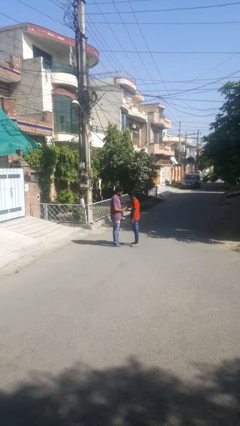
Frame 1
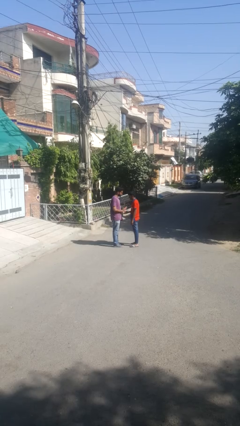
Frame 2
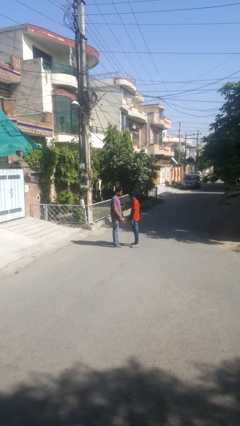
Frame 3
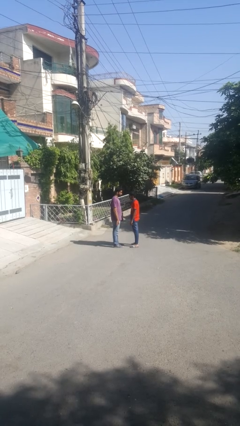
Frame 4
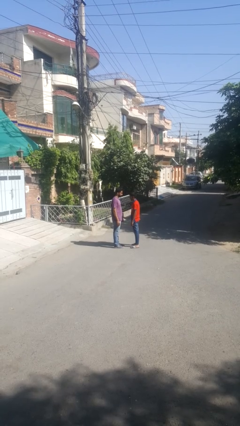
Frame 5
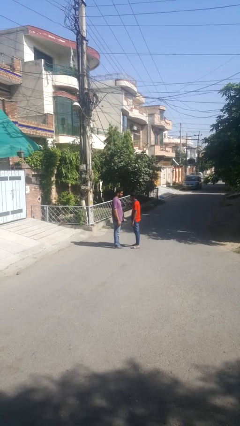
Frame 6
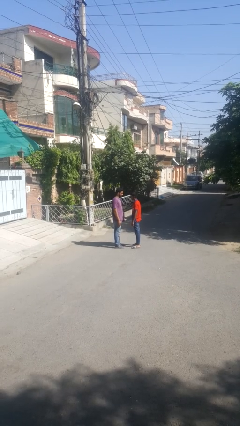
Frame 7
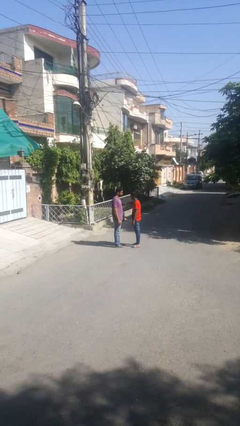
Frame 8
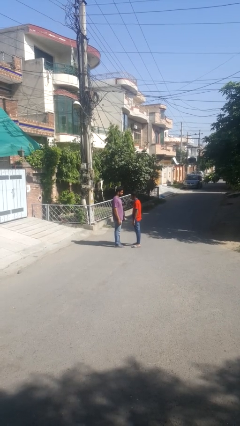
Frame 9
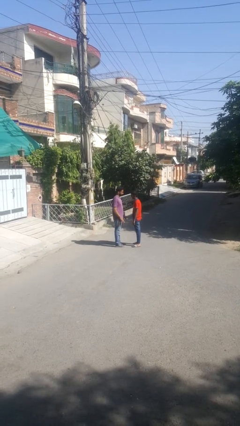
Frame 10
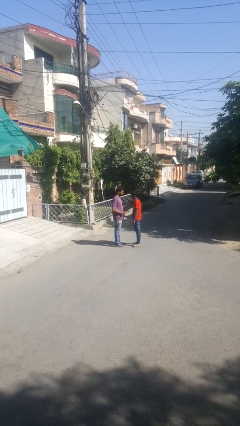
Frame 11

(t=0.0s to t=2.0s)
person highfives hand

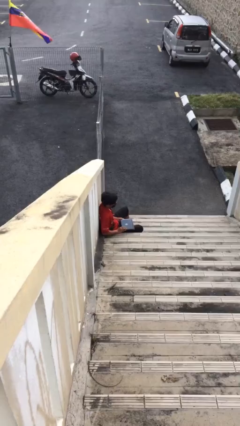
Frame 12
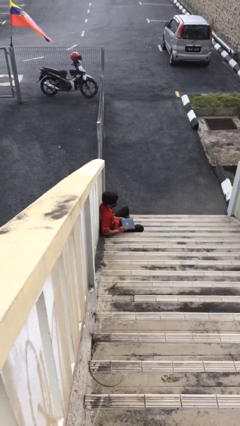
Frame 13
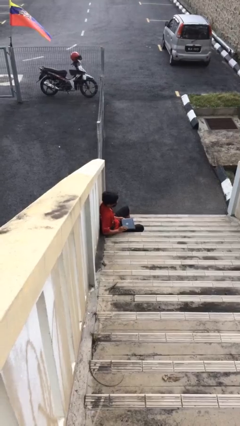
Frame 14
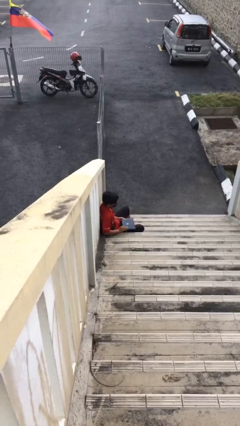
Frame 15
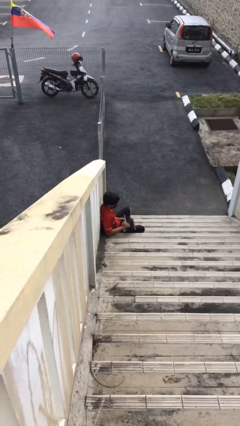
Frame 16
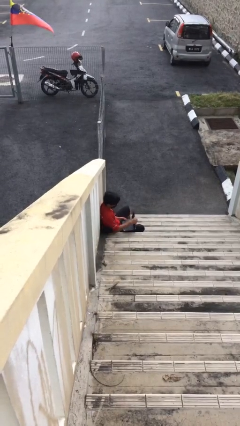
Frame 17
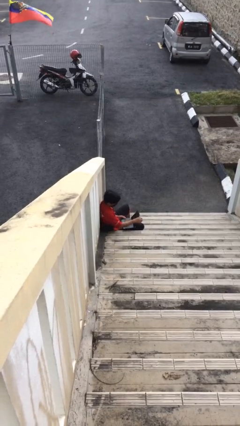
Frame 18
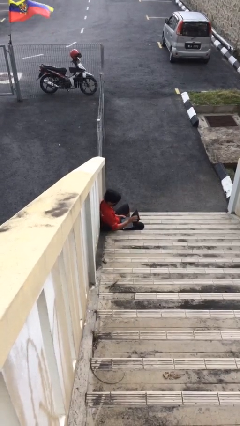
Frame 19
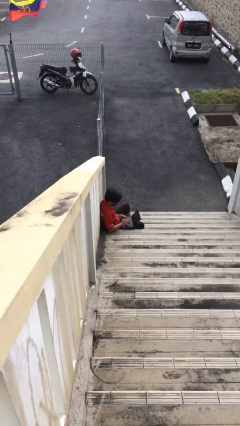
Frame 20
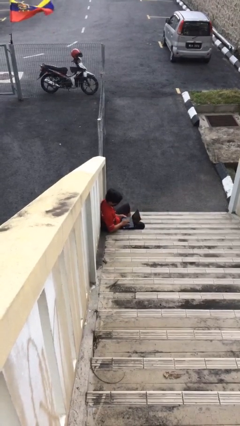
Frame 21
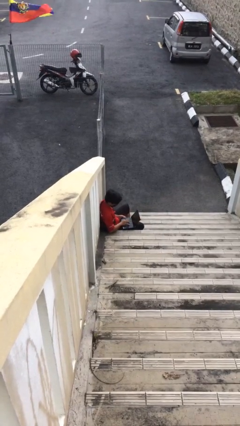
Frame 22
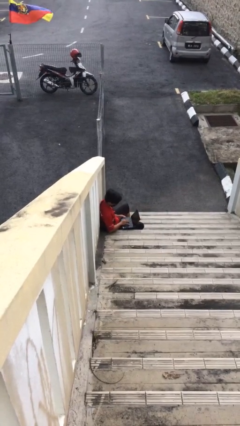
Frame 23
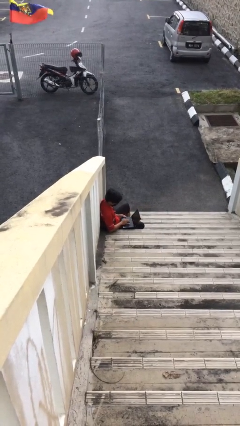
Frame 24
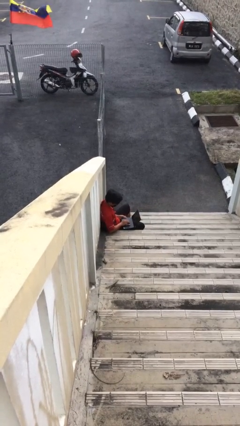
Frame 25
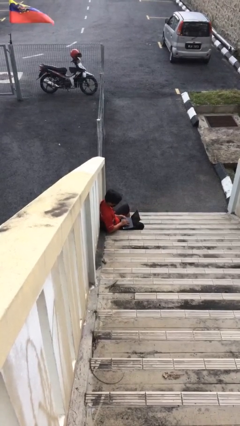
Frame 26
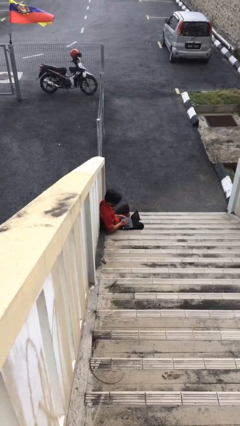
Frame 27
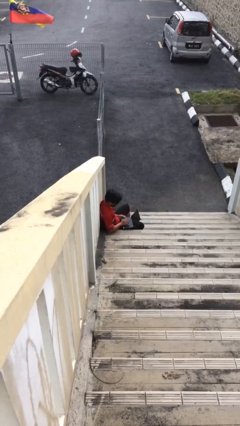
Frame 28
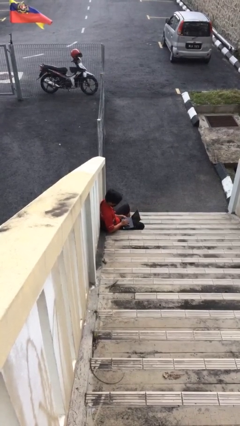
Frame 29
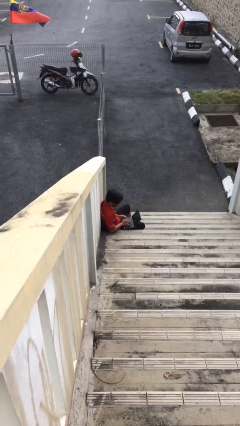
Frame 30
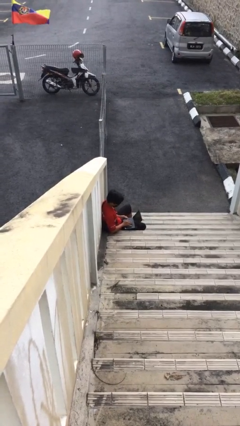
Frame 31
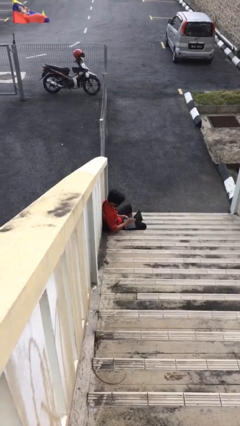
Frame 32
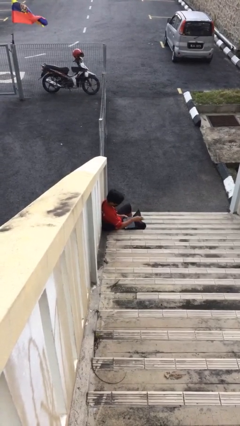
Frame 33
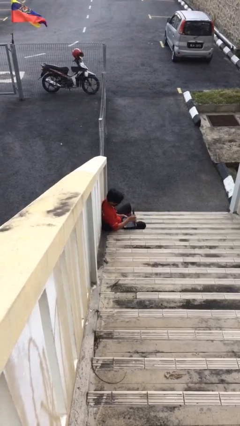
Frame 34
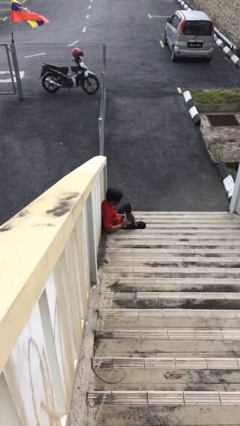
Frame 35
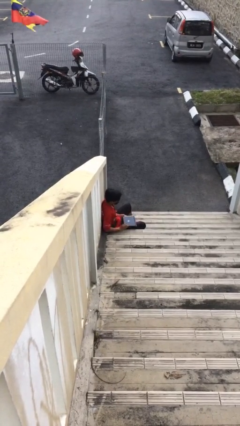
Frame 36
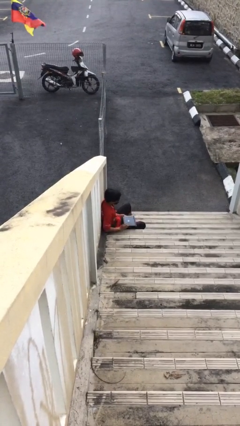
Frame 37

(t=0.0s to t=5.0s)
person interacts with laptop

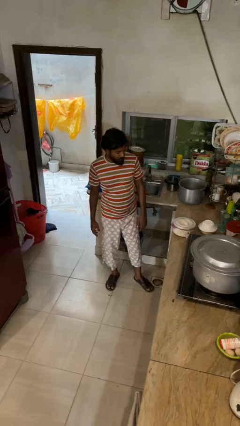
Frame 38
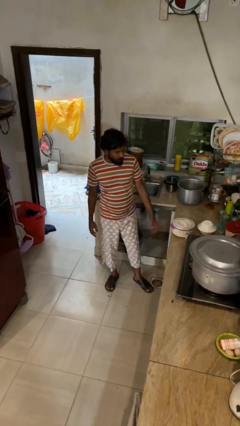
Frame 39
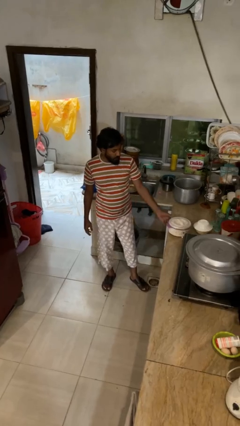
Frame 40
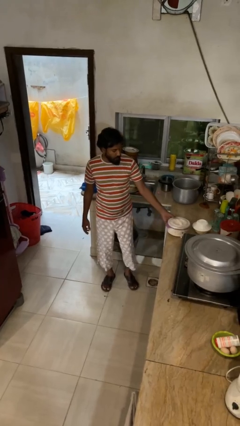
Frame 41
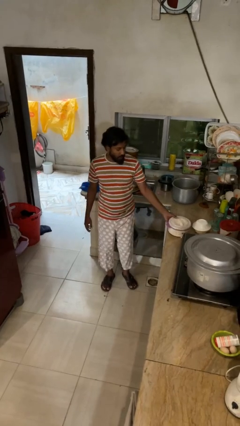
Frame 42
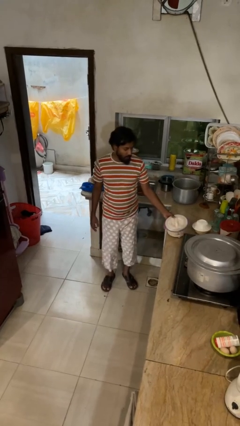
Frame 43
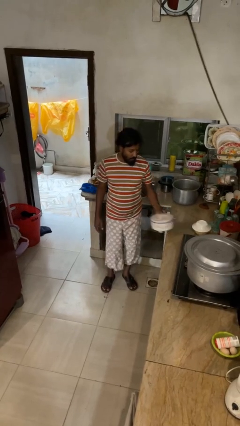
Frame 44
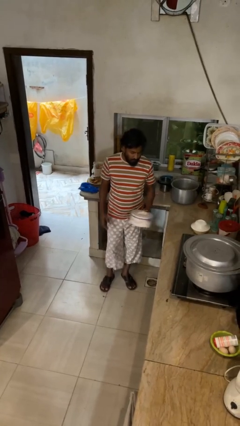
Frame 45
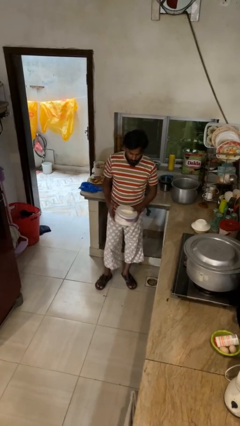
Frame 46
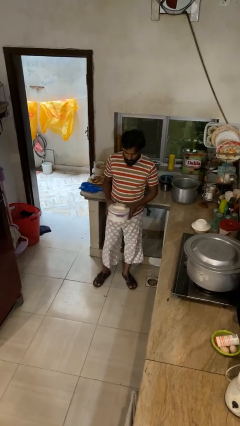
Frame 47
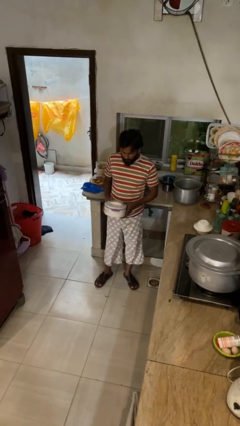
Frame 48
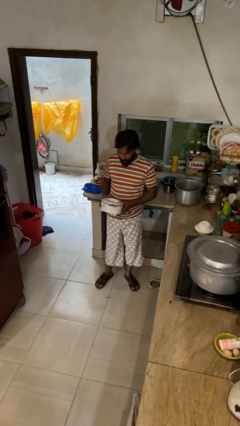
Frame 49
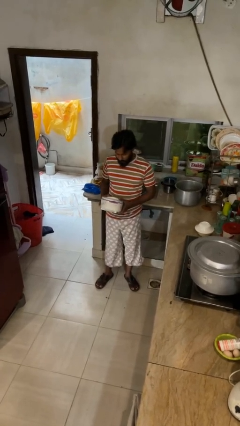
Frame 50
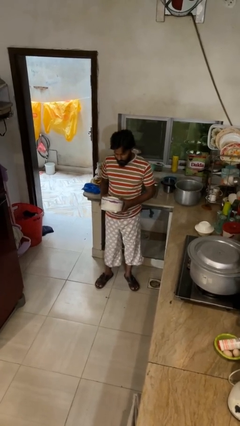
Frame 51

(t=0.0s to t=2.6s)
person picks up object from countertop

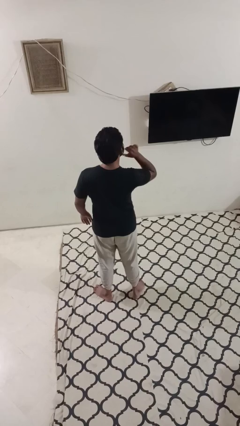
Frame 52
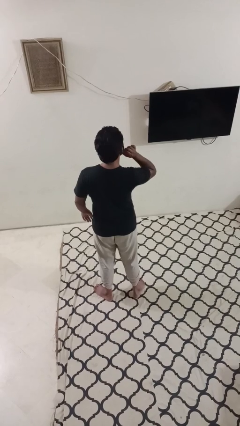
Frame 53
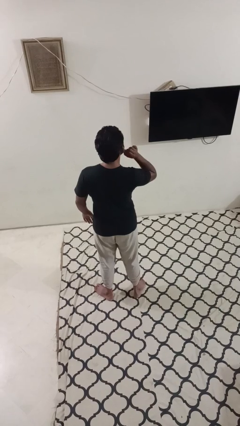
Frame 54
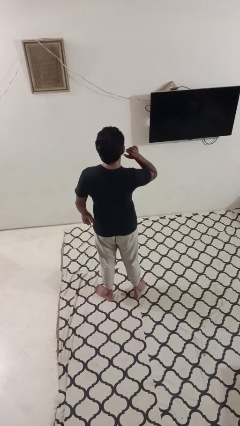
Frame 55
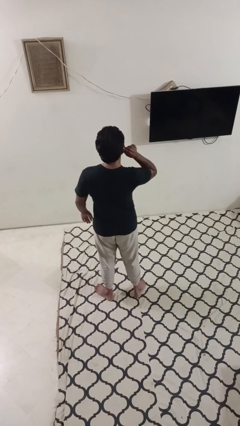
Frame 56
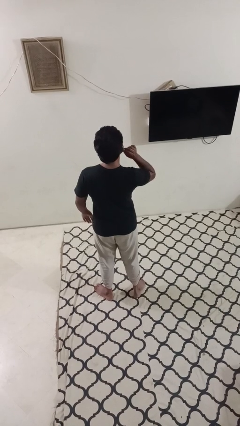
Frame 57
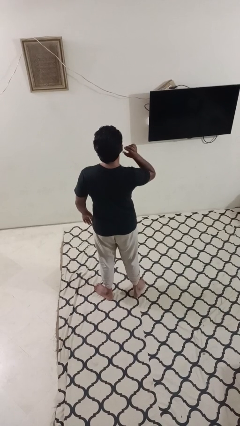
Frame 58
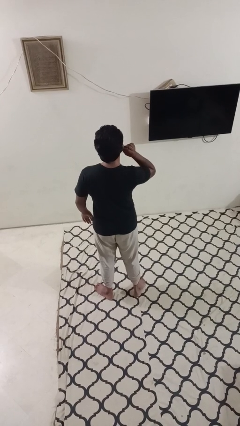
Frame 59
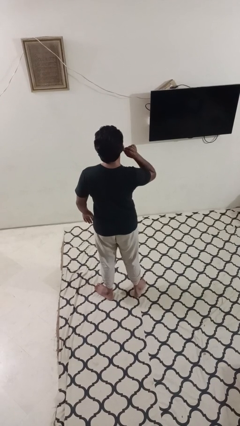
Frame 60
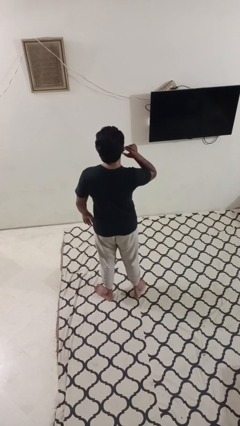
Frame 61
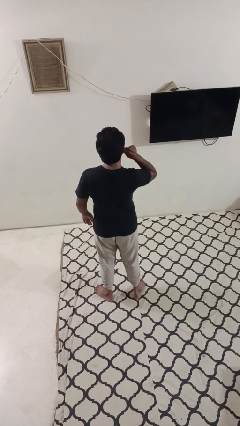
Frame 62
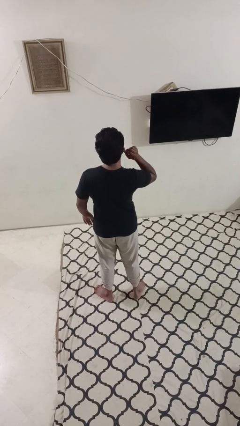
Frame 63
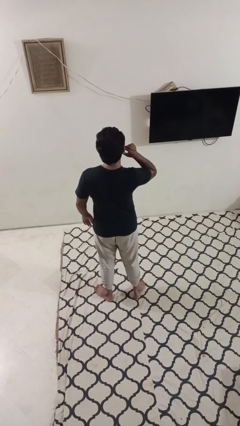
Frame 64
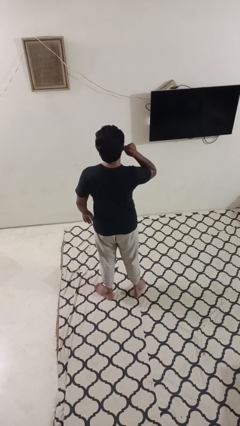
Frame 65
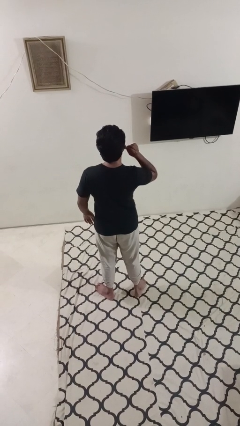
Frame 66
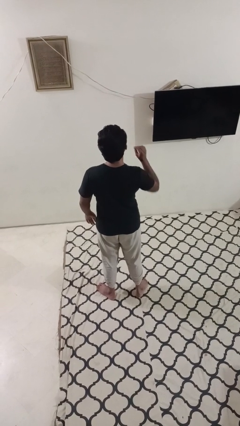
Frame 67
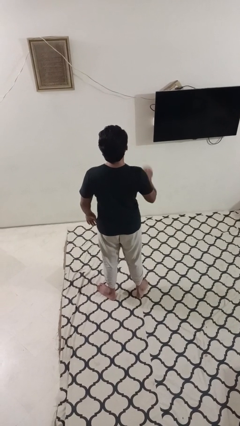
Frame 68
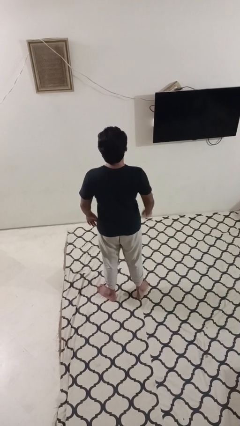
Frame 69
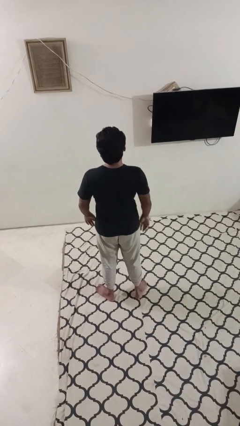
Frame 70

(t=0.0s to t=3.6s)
person touches earlobe

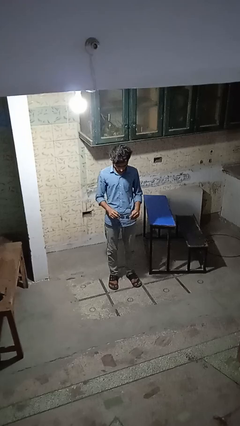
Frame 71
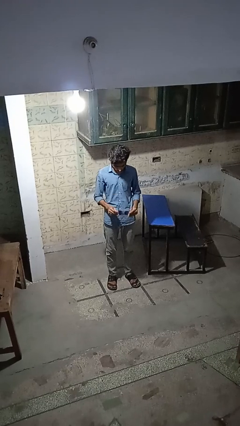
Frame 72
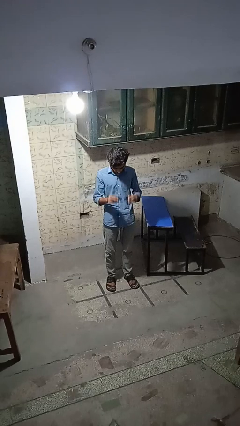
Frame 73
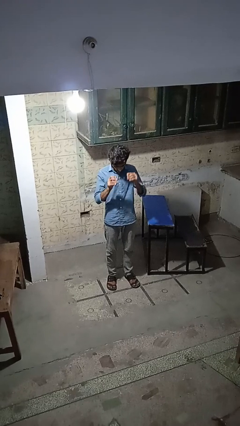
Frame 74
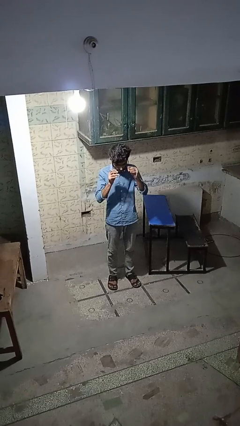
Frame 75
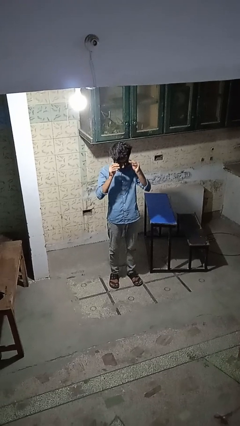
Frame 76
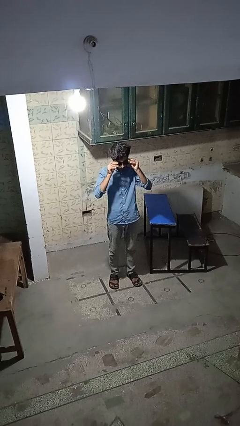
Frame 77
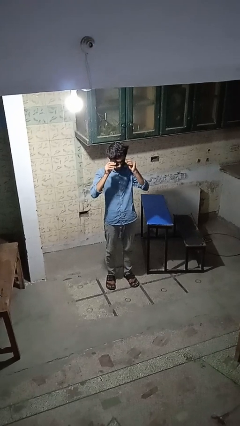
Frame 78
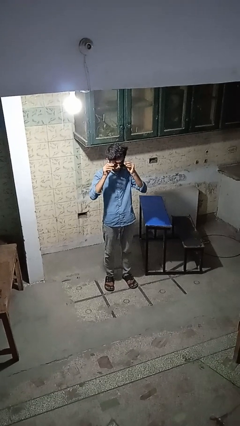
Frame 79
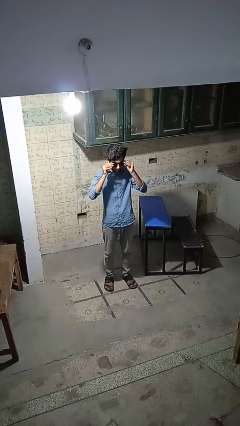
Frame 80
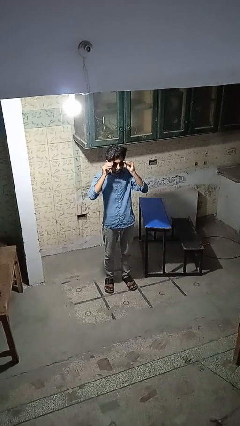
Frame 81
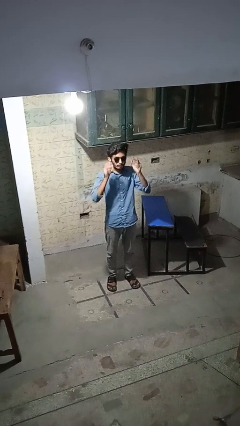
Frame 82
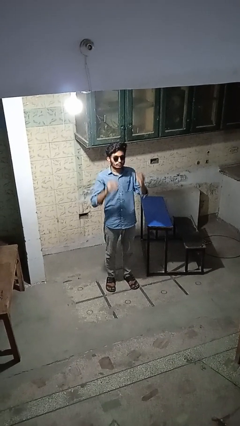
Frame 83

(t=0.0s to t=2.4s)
person puts on sunglasses

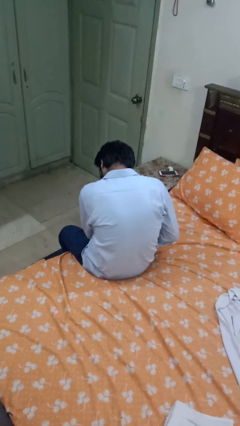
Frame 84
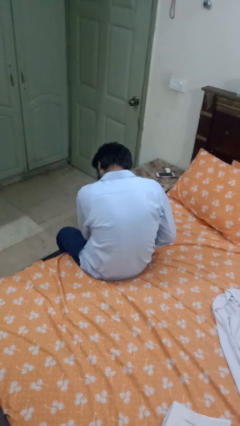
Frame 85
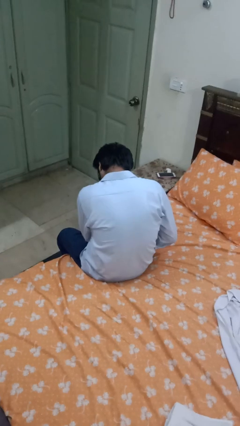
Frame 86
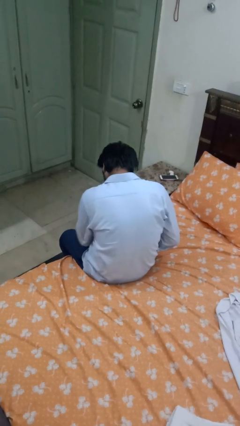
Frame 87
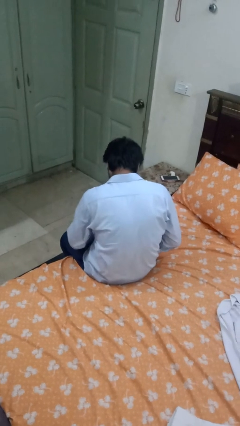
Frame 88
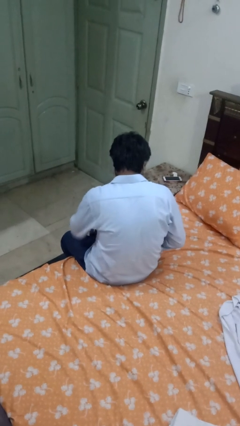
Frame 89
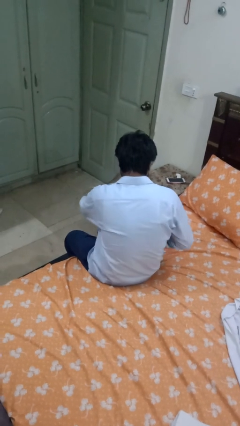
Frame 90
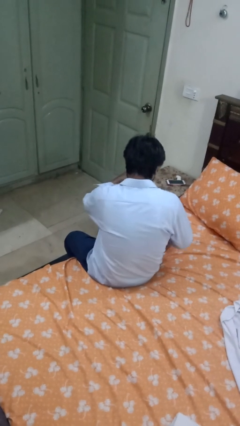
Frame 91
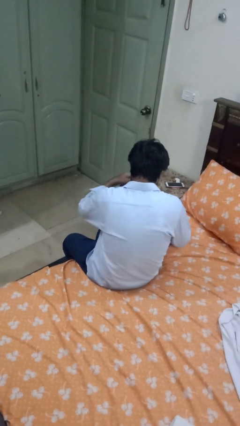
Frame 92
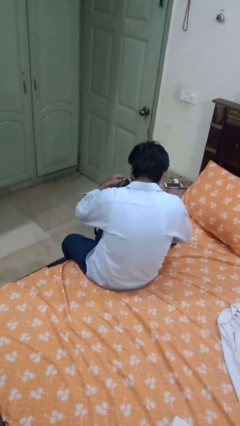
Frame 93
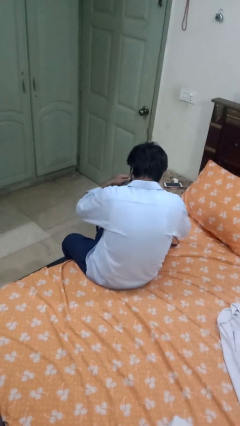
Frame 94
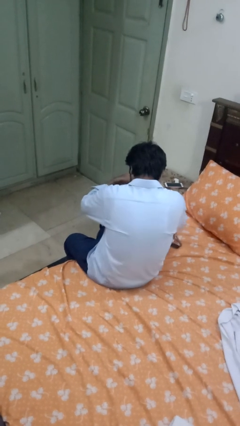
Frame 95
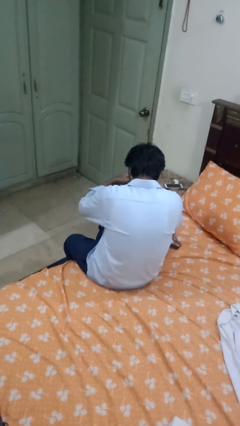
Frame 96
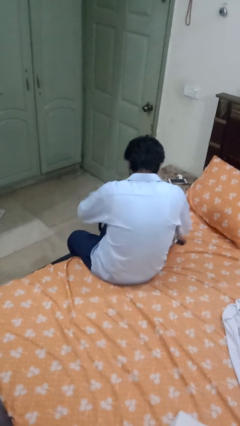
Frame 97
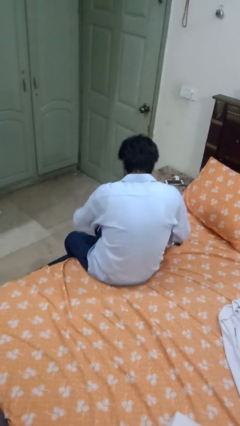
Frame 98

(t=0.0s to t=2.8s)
person searches in bag
